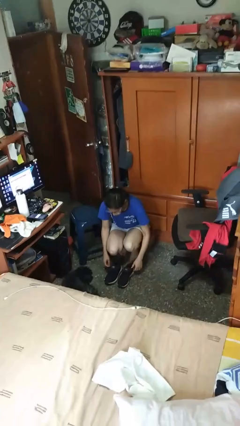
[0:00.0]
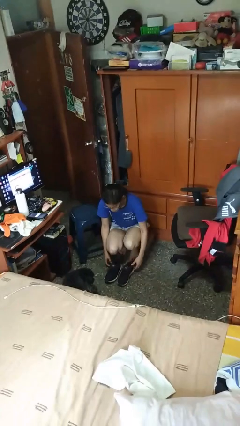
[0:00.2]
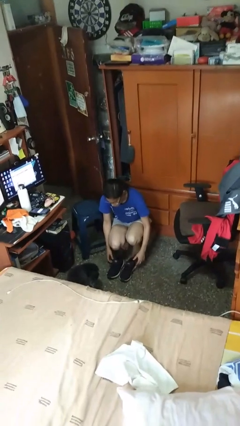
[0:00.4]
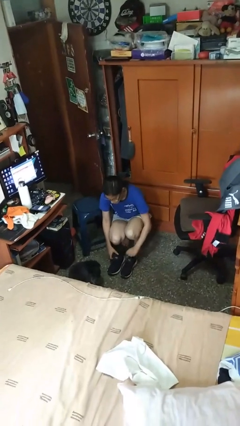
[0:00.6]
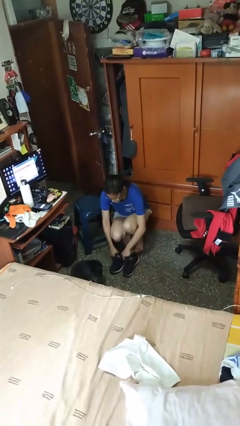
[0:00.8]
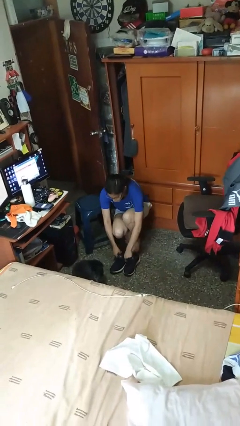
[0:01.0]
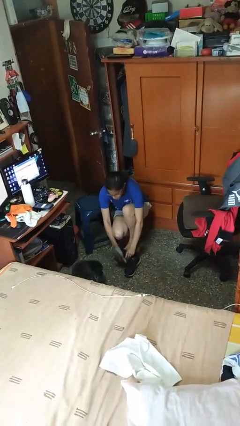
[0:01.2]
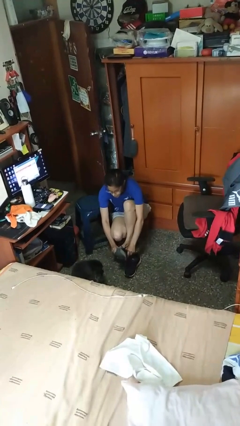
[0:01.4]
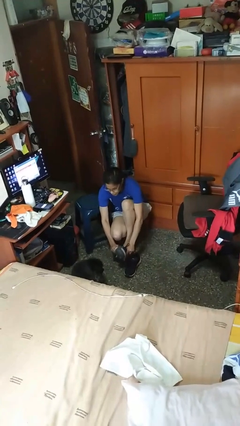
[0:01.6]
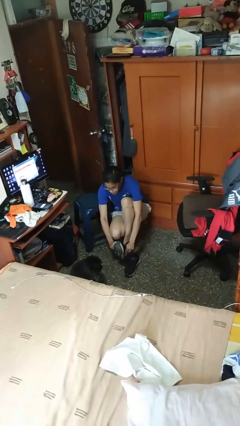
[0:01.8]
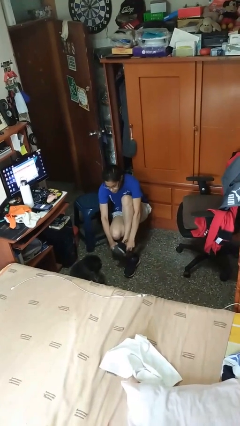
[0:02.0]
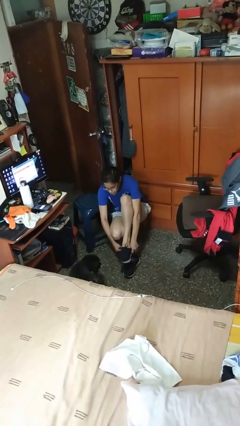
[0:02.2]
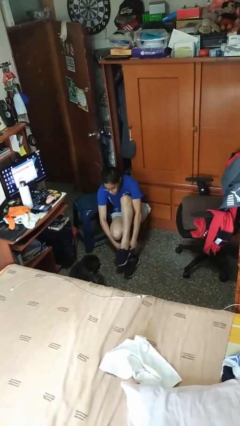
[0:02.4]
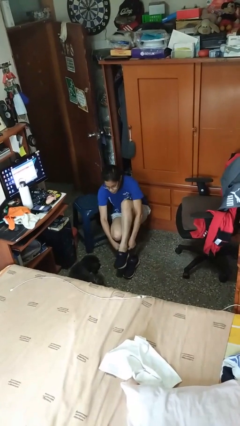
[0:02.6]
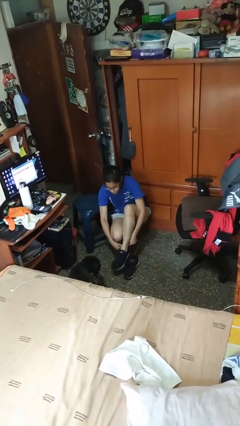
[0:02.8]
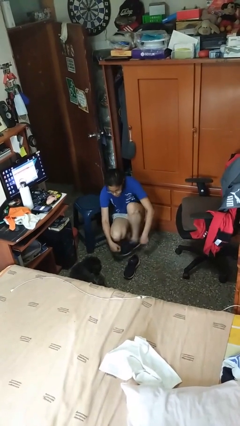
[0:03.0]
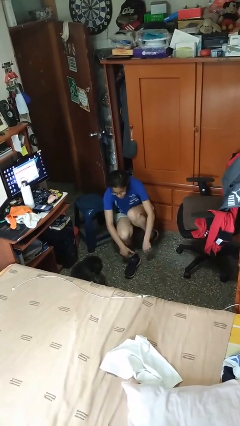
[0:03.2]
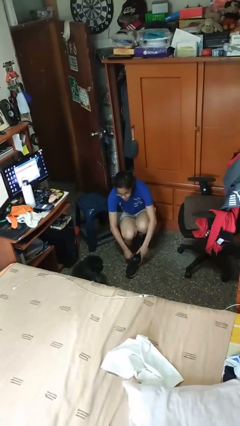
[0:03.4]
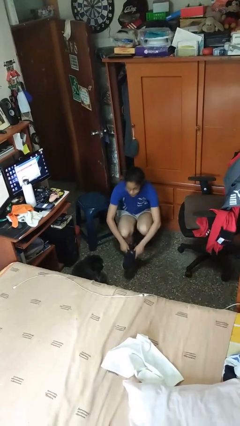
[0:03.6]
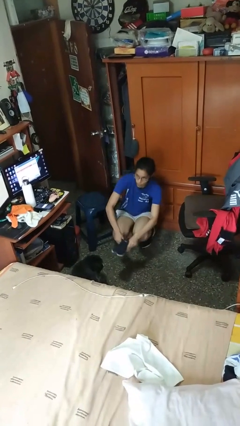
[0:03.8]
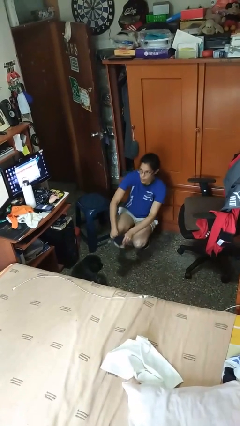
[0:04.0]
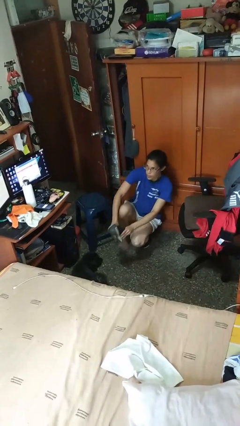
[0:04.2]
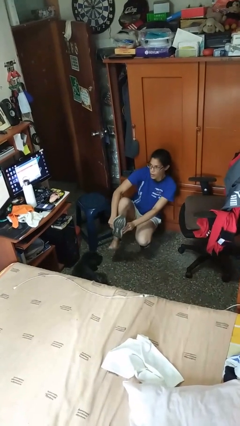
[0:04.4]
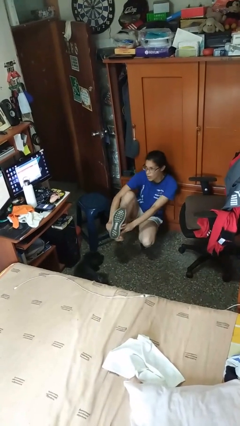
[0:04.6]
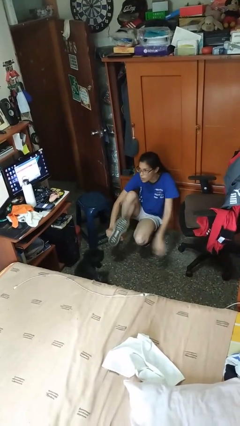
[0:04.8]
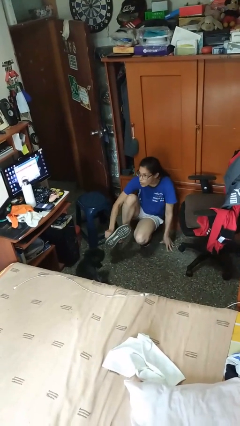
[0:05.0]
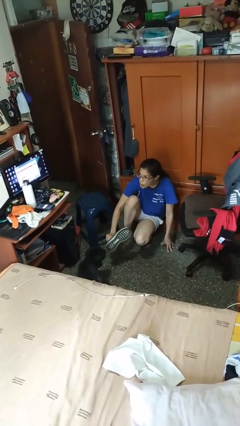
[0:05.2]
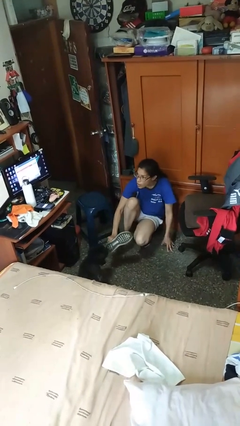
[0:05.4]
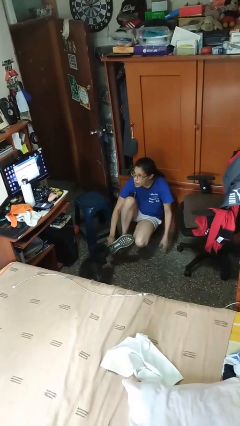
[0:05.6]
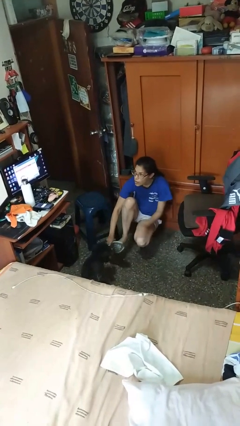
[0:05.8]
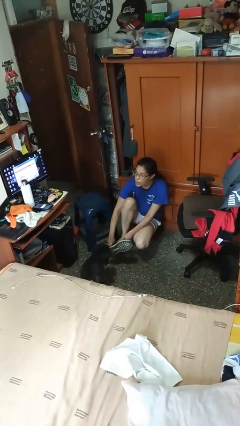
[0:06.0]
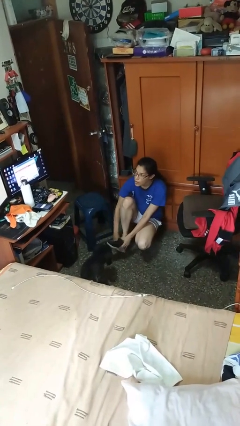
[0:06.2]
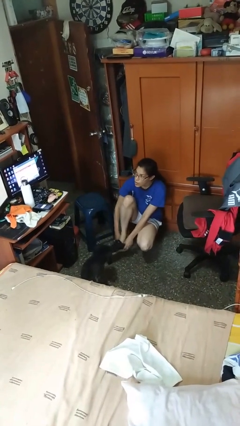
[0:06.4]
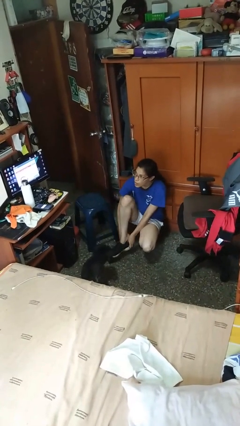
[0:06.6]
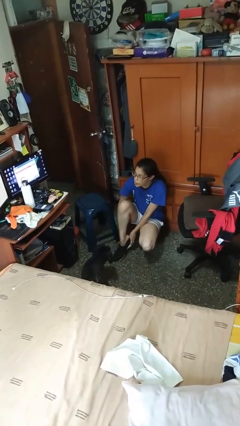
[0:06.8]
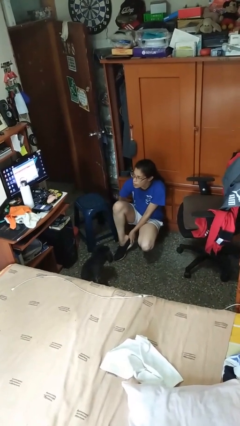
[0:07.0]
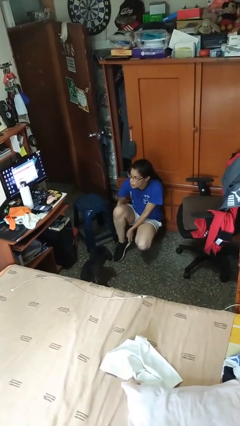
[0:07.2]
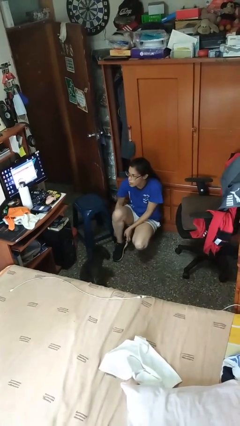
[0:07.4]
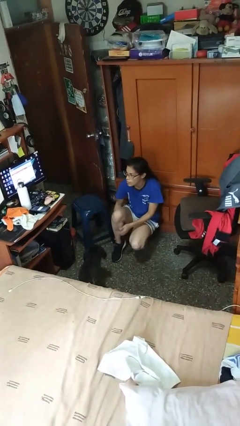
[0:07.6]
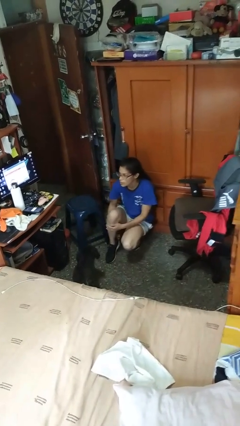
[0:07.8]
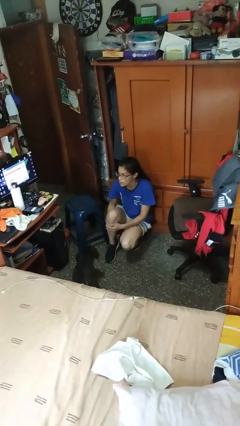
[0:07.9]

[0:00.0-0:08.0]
person puts on shoes

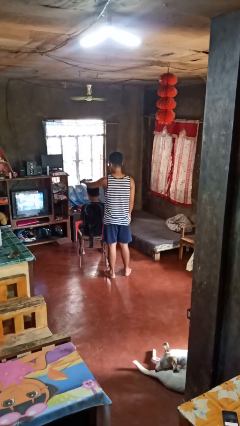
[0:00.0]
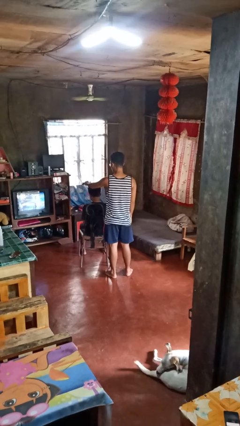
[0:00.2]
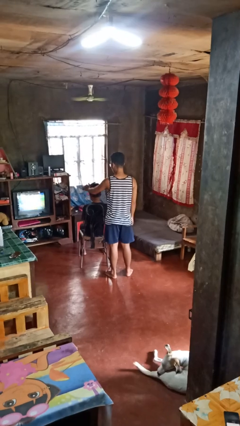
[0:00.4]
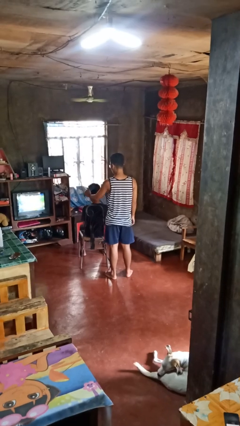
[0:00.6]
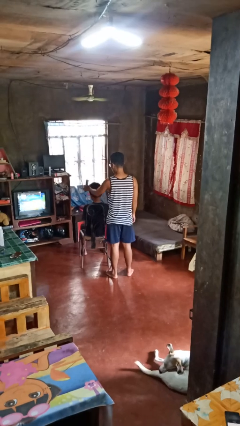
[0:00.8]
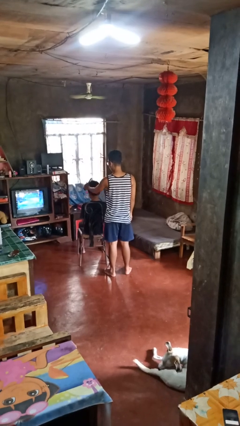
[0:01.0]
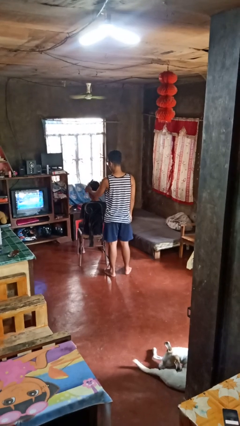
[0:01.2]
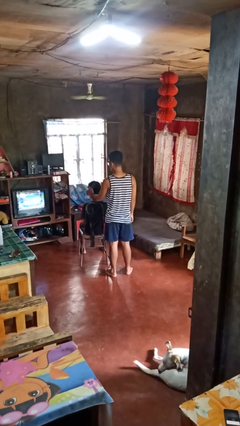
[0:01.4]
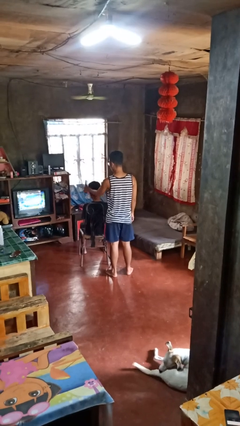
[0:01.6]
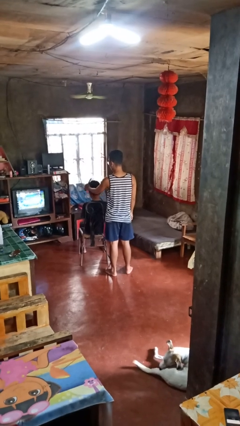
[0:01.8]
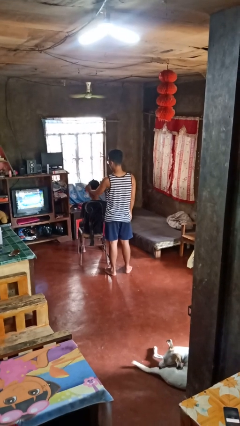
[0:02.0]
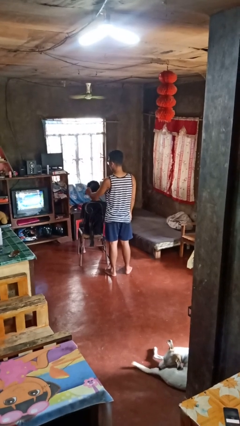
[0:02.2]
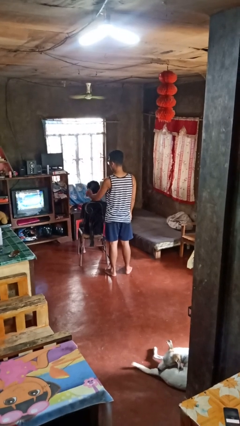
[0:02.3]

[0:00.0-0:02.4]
person brushes hair of person

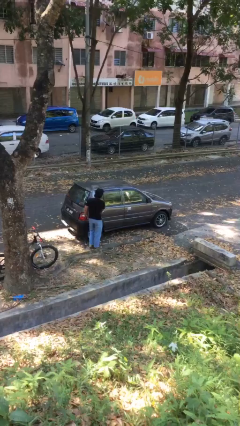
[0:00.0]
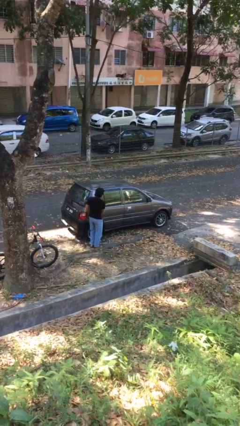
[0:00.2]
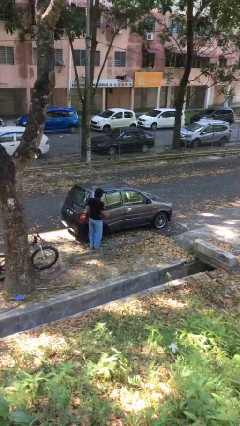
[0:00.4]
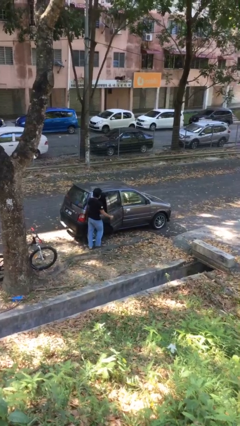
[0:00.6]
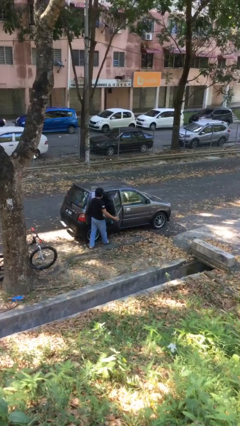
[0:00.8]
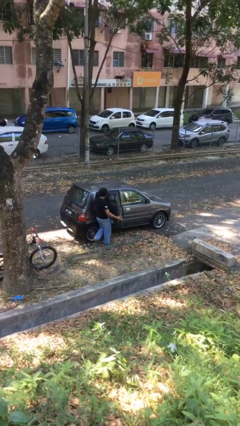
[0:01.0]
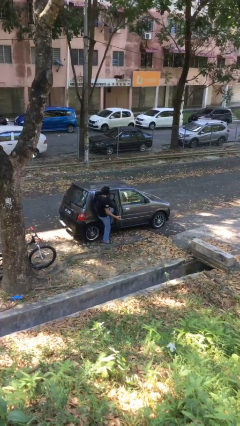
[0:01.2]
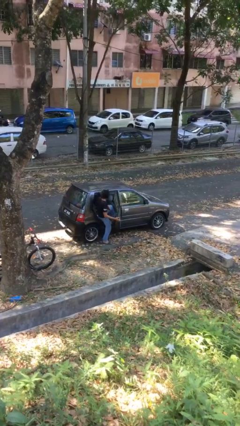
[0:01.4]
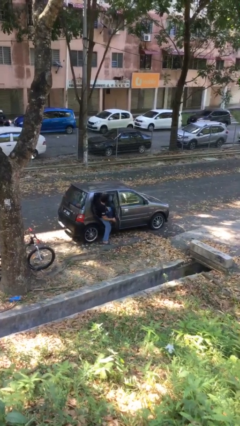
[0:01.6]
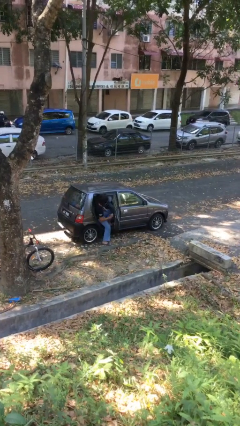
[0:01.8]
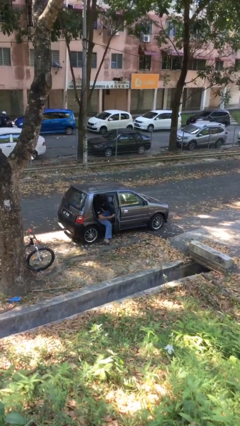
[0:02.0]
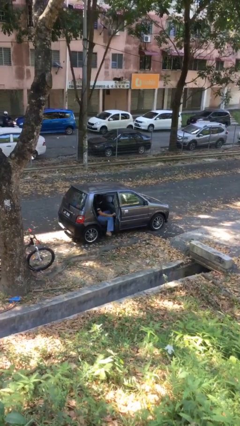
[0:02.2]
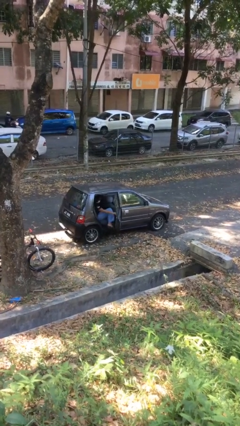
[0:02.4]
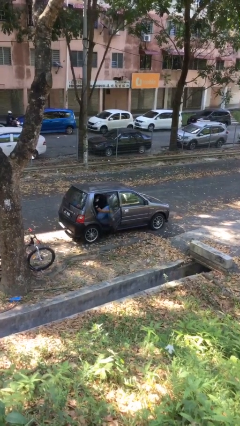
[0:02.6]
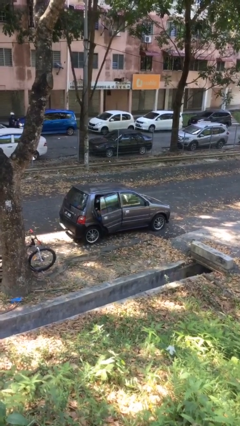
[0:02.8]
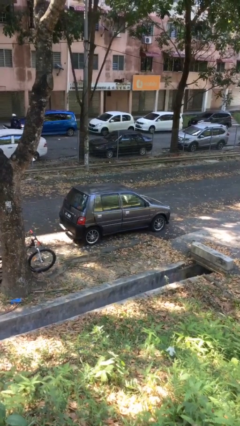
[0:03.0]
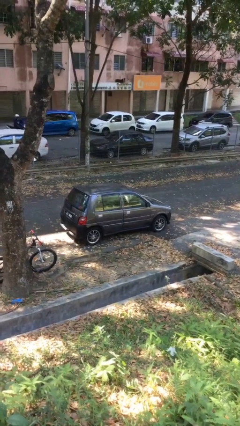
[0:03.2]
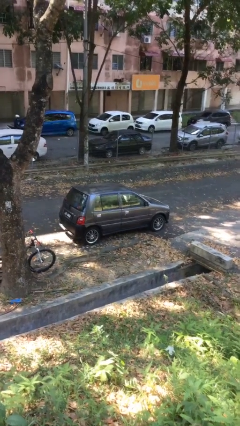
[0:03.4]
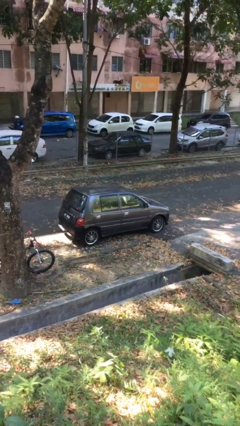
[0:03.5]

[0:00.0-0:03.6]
car picks up person

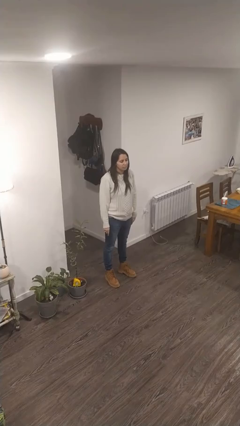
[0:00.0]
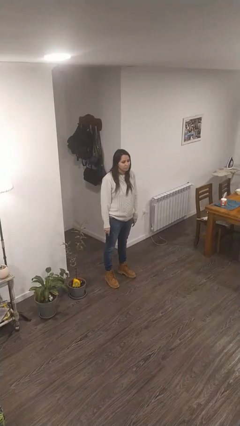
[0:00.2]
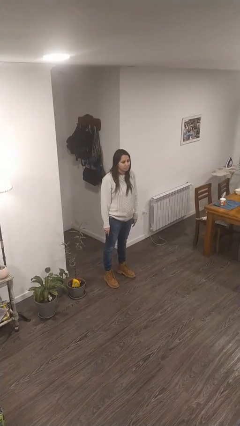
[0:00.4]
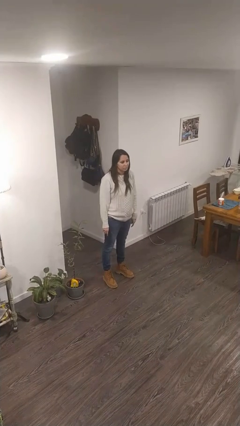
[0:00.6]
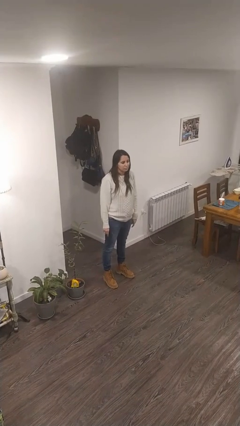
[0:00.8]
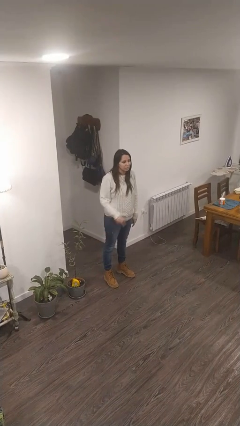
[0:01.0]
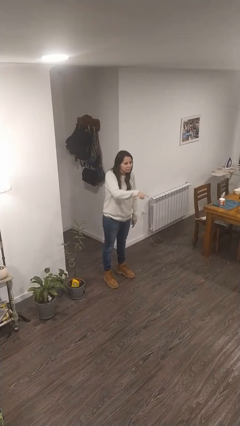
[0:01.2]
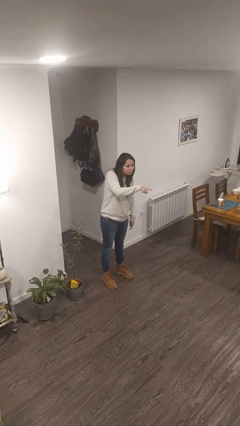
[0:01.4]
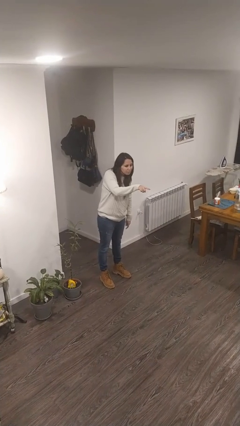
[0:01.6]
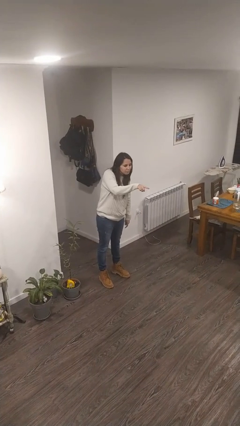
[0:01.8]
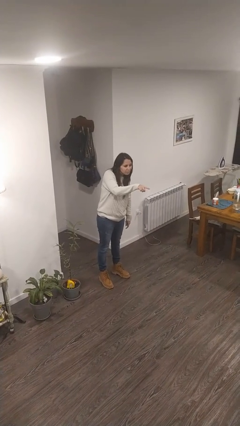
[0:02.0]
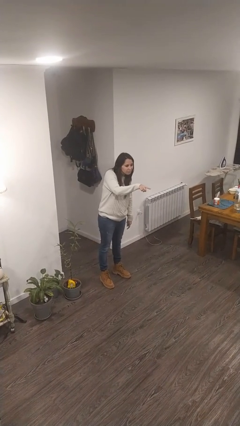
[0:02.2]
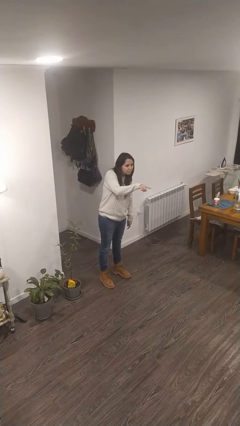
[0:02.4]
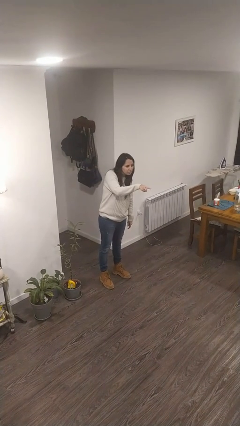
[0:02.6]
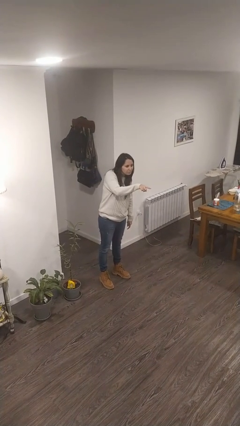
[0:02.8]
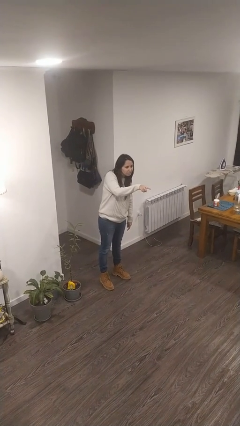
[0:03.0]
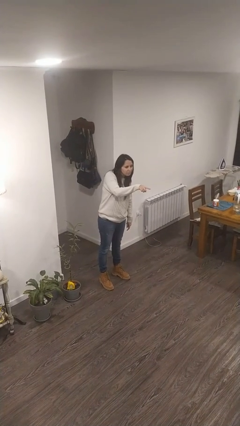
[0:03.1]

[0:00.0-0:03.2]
person points at person

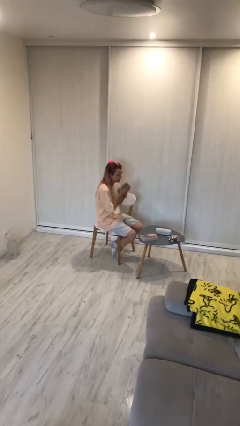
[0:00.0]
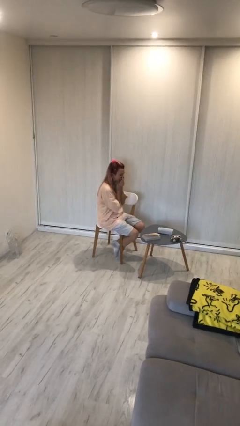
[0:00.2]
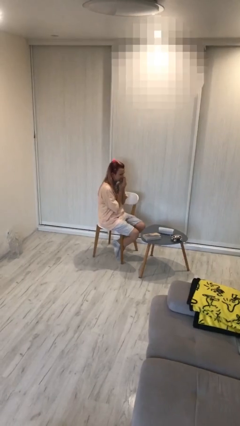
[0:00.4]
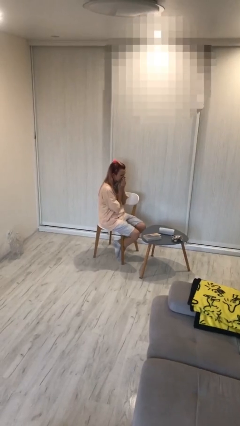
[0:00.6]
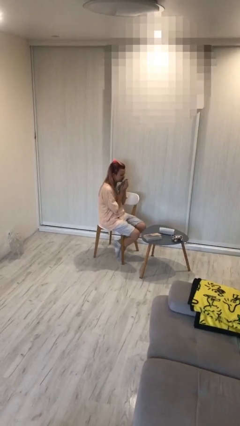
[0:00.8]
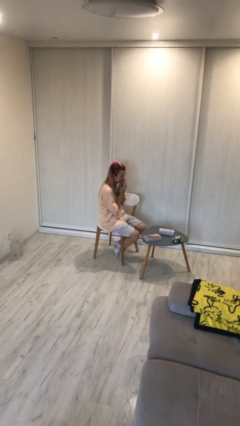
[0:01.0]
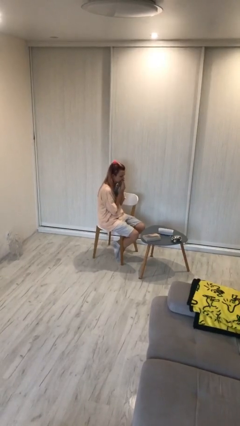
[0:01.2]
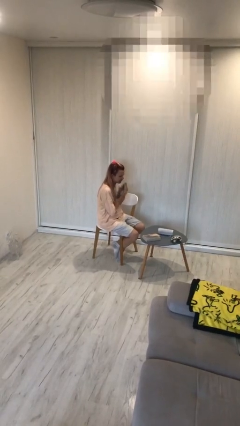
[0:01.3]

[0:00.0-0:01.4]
person wipes mouth with napkin
